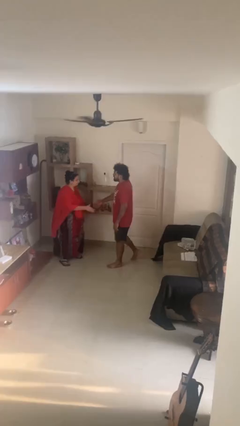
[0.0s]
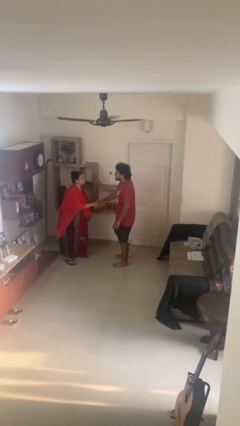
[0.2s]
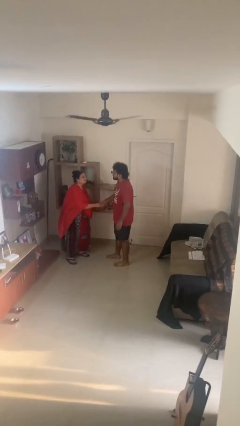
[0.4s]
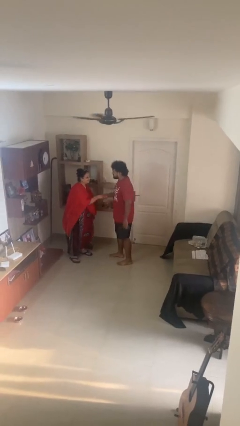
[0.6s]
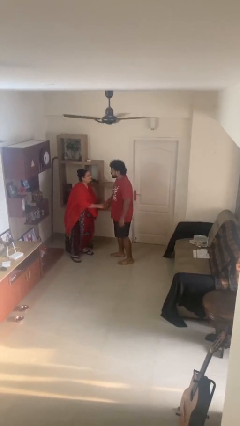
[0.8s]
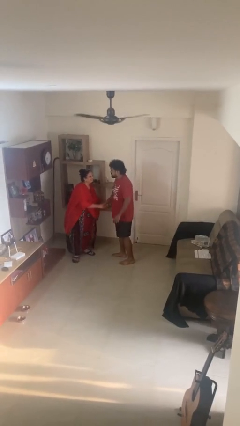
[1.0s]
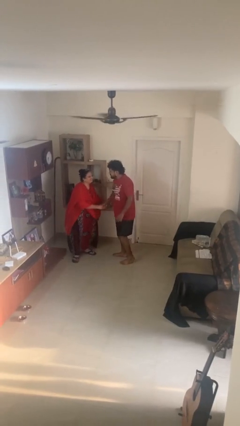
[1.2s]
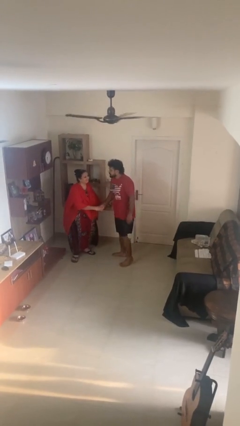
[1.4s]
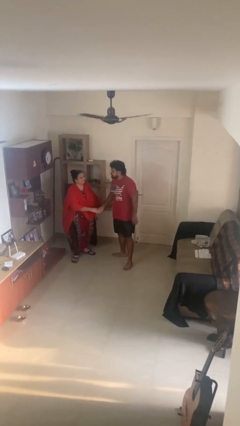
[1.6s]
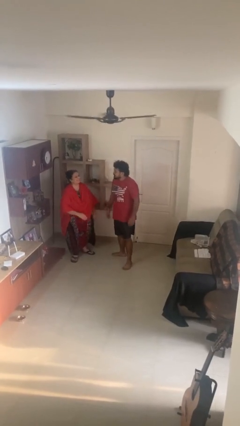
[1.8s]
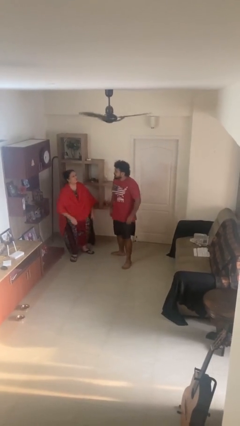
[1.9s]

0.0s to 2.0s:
person shakes hand

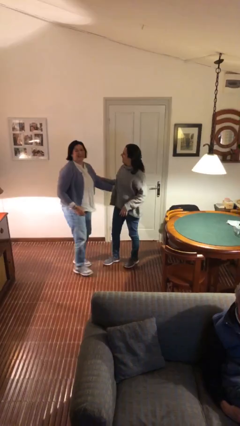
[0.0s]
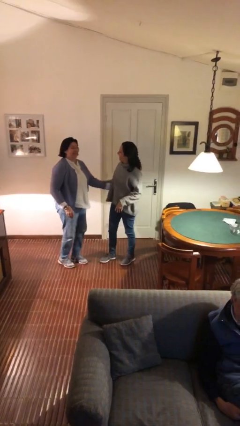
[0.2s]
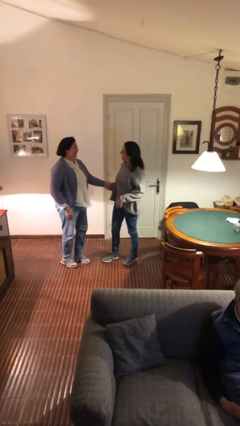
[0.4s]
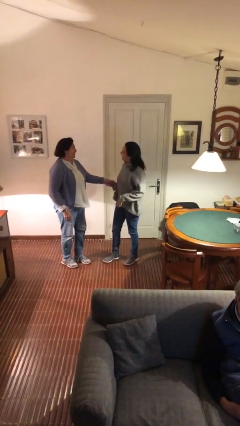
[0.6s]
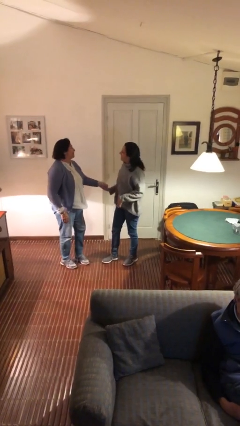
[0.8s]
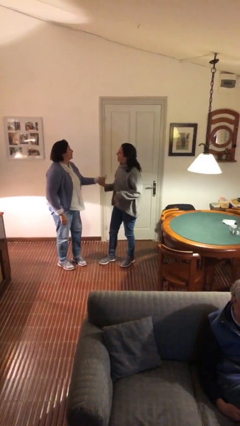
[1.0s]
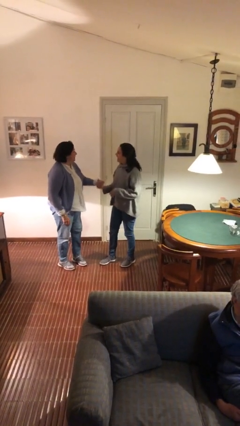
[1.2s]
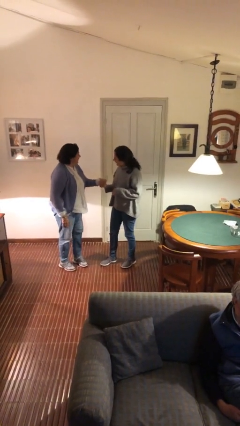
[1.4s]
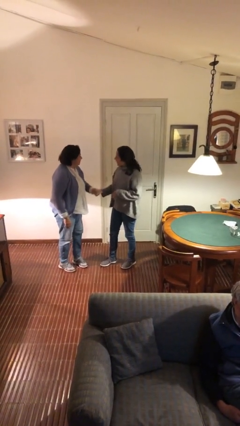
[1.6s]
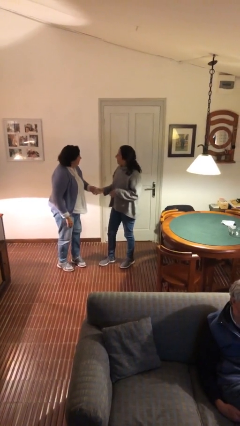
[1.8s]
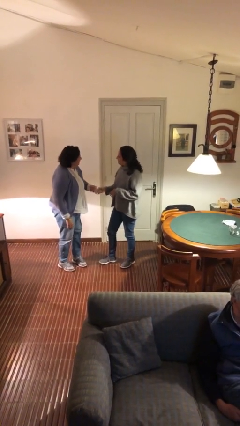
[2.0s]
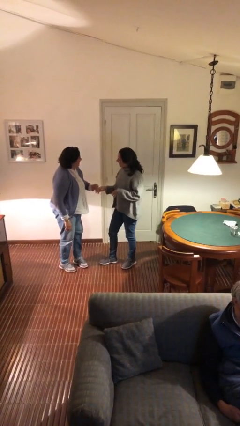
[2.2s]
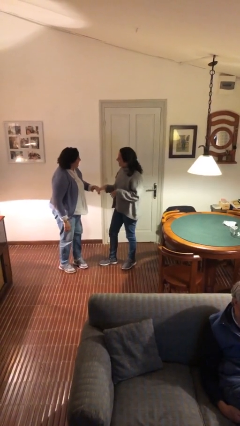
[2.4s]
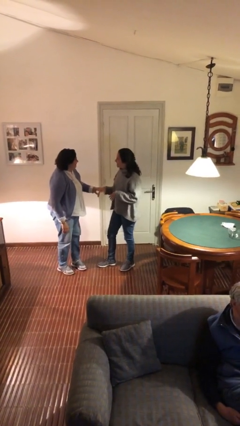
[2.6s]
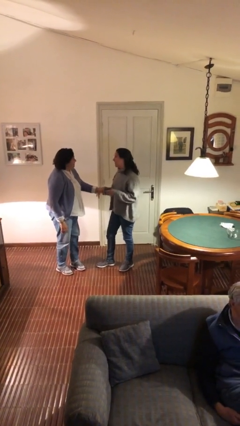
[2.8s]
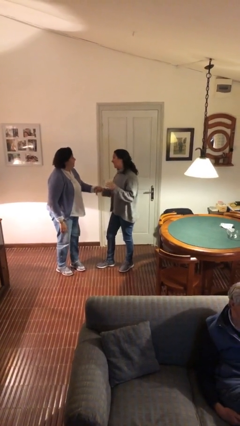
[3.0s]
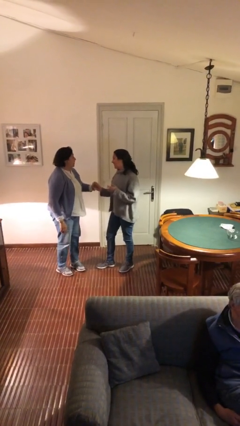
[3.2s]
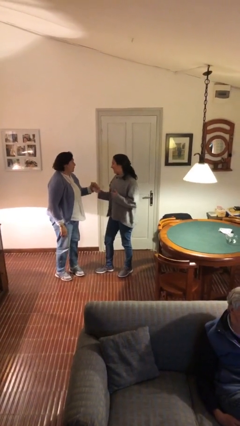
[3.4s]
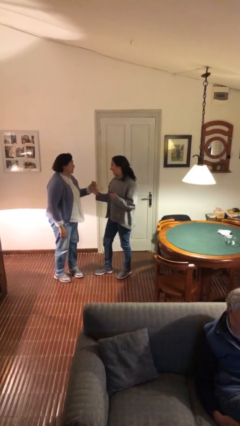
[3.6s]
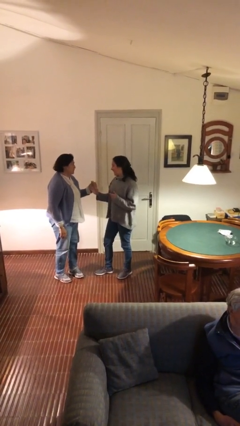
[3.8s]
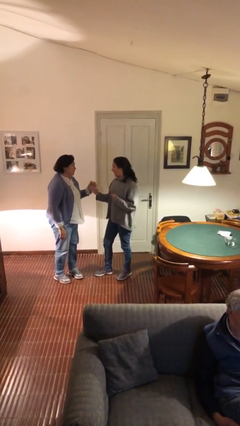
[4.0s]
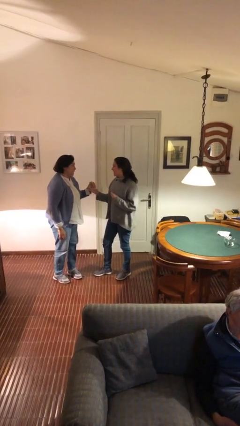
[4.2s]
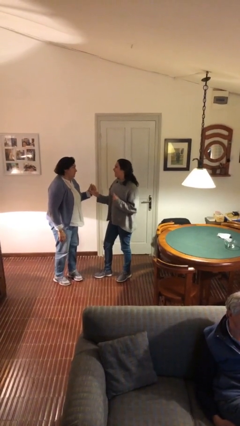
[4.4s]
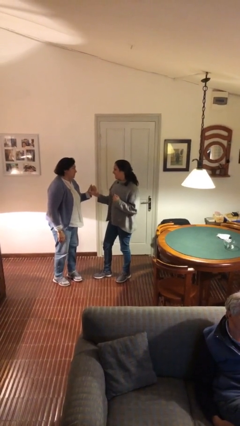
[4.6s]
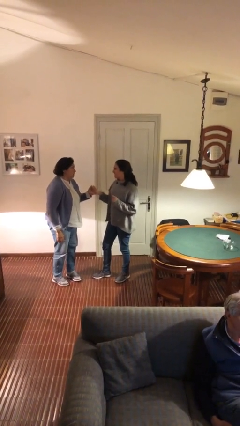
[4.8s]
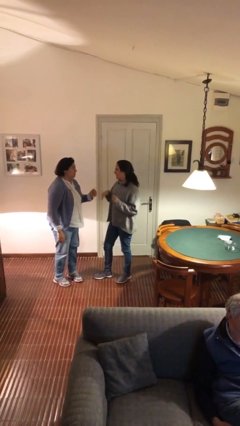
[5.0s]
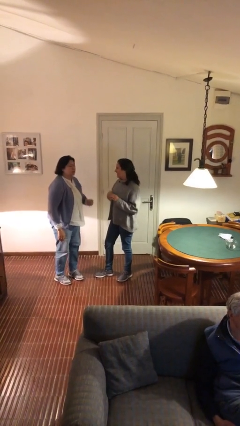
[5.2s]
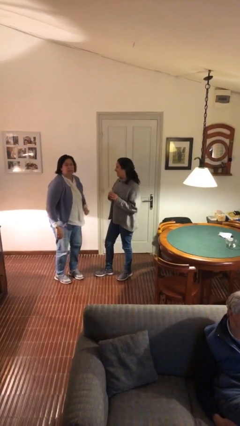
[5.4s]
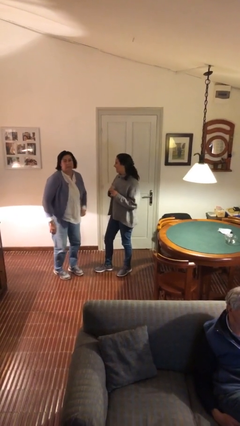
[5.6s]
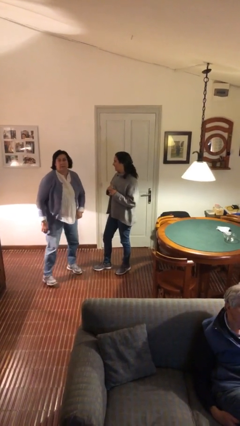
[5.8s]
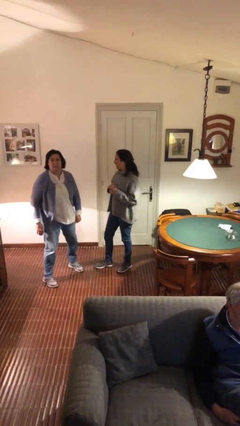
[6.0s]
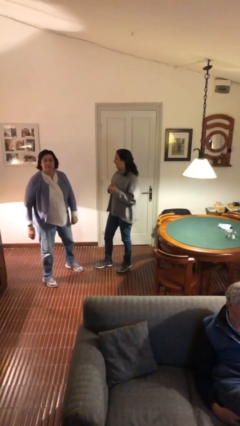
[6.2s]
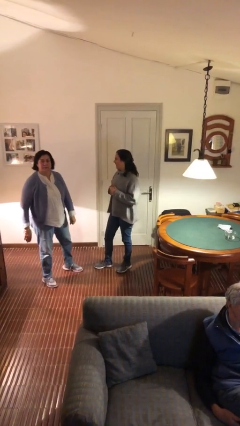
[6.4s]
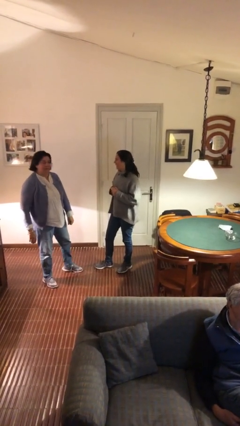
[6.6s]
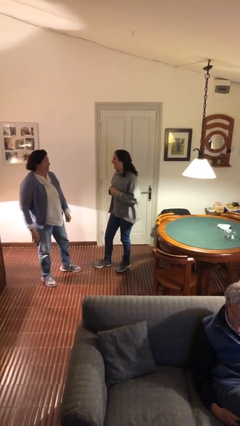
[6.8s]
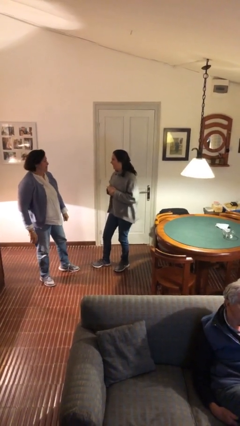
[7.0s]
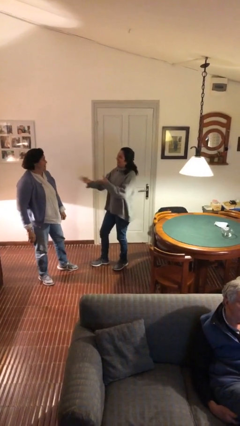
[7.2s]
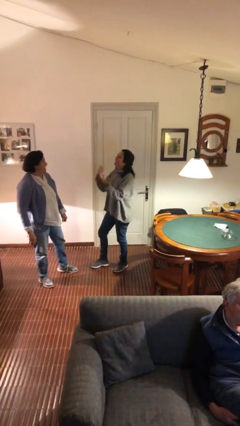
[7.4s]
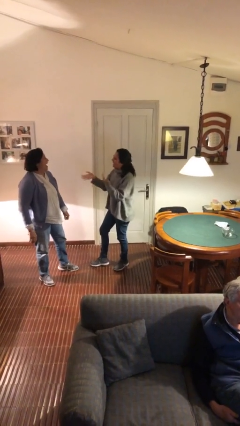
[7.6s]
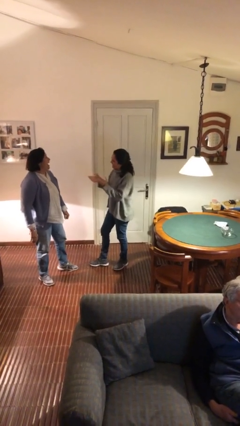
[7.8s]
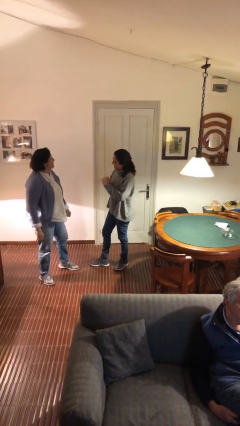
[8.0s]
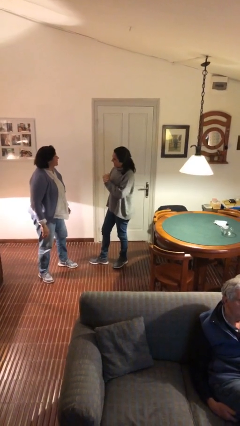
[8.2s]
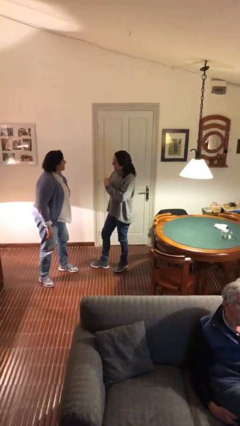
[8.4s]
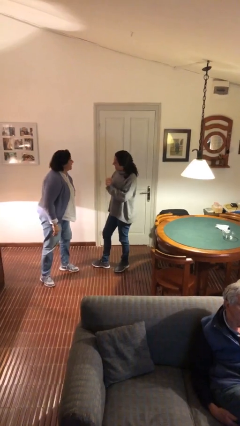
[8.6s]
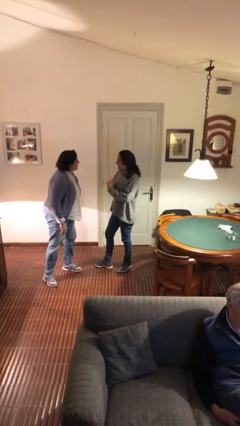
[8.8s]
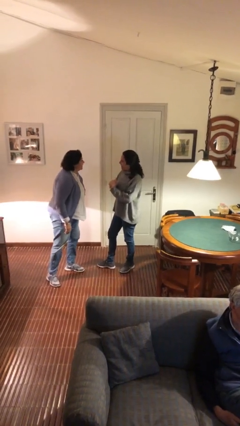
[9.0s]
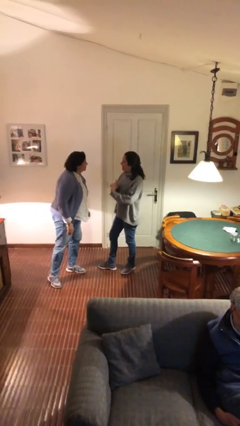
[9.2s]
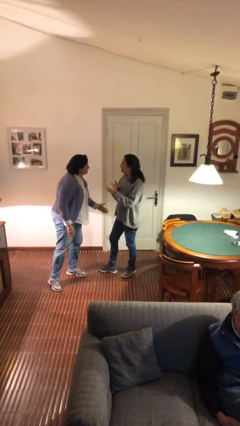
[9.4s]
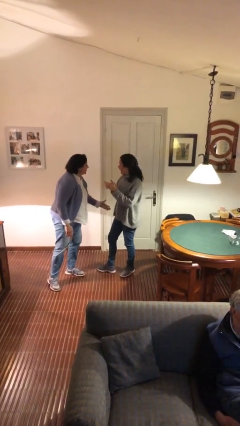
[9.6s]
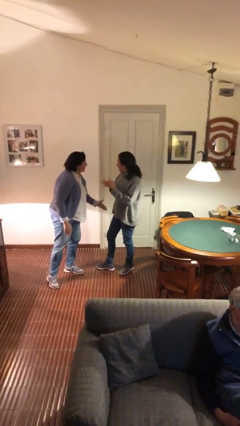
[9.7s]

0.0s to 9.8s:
person talks to person

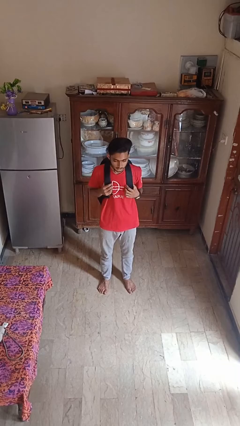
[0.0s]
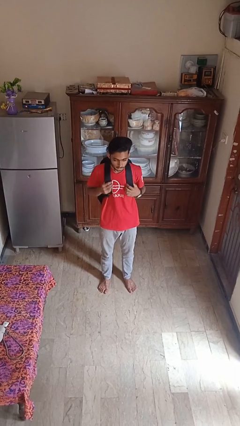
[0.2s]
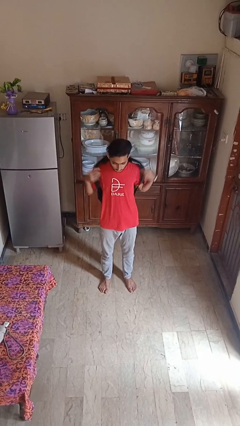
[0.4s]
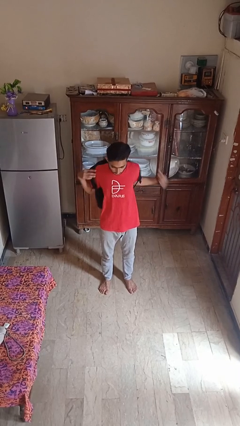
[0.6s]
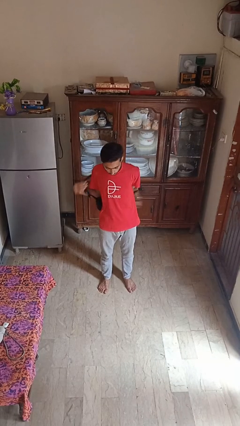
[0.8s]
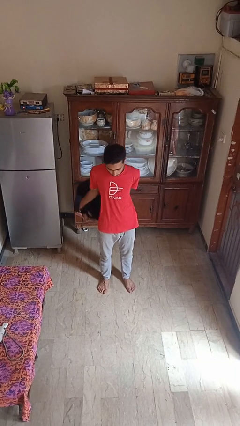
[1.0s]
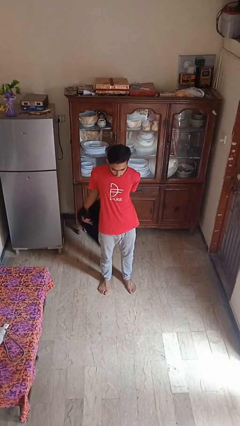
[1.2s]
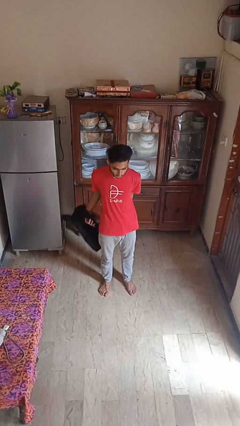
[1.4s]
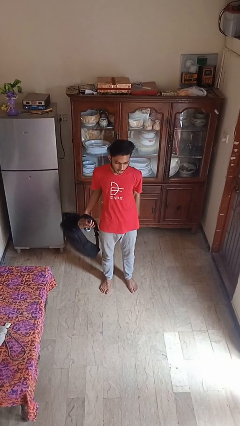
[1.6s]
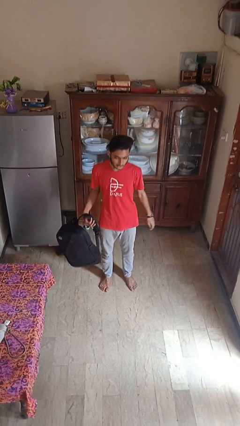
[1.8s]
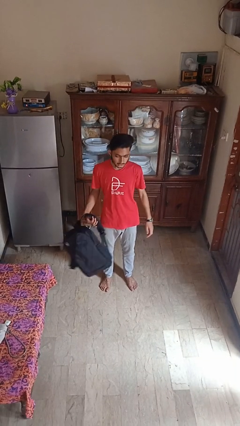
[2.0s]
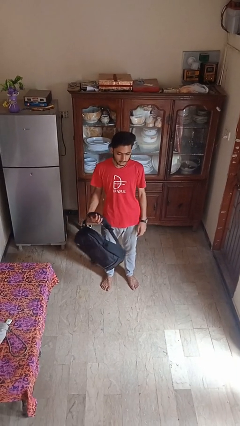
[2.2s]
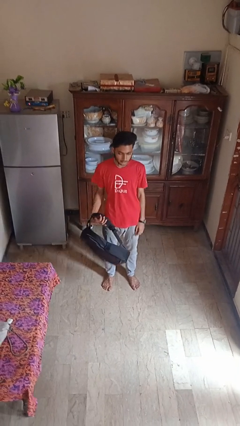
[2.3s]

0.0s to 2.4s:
person takes off backpack

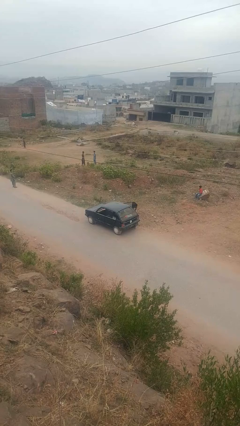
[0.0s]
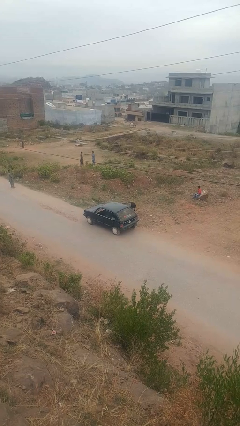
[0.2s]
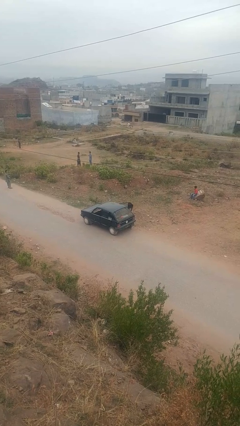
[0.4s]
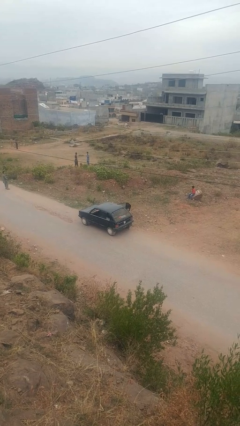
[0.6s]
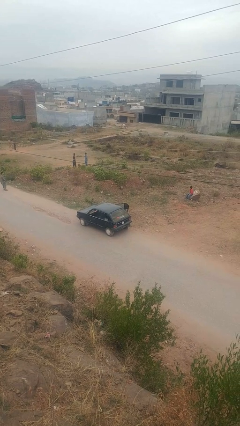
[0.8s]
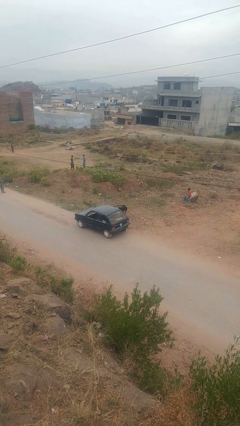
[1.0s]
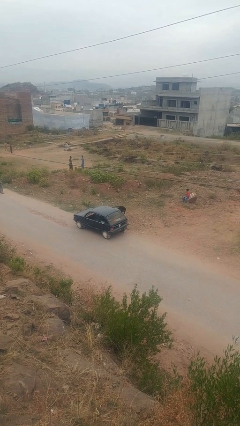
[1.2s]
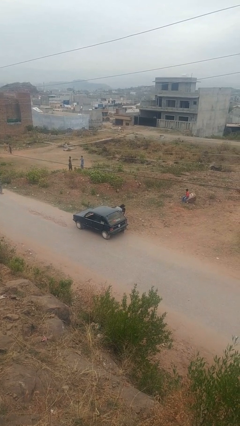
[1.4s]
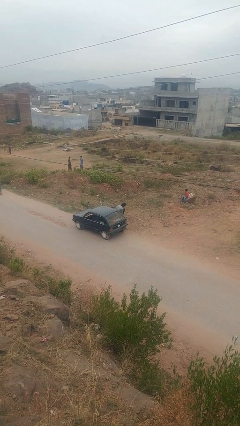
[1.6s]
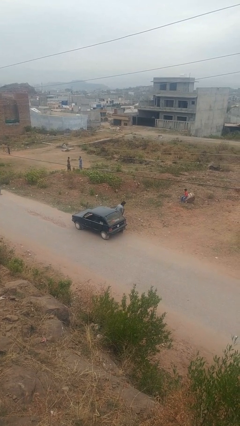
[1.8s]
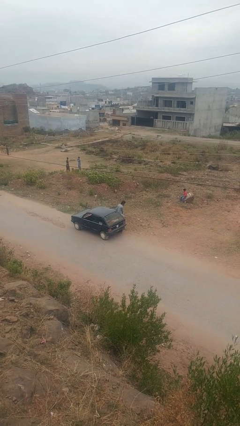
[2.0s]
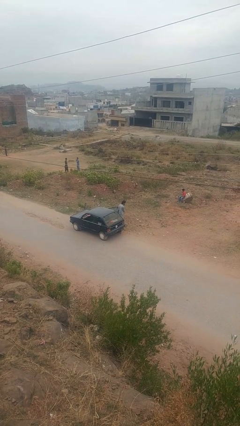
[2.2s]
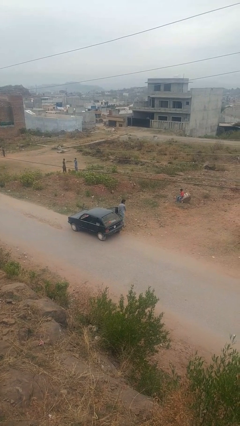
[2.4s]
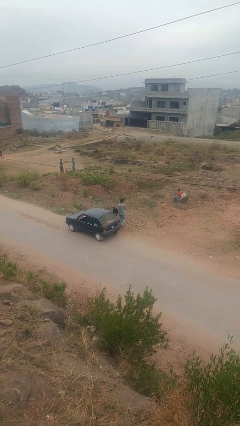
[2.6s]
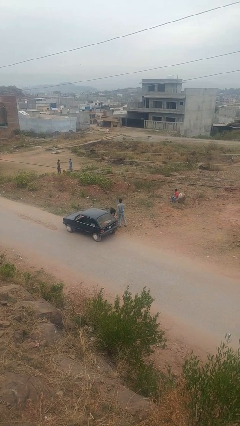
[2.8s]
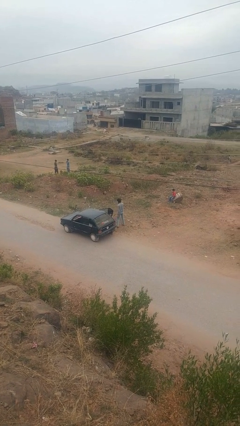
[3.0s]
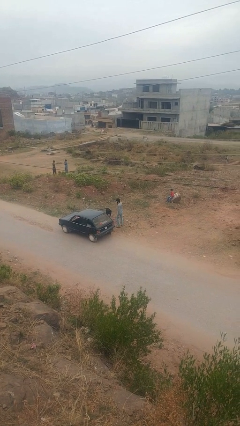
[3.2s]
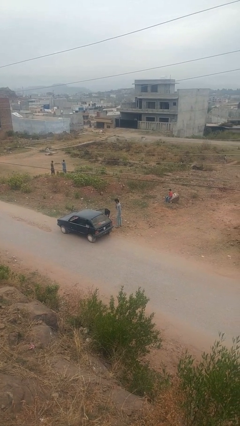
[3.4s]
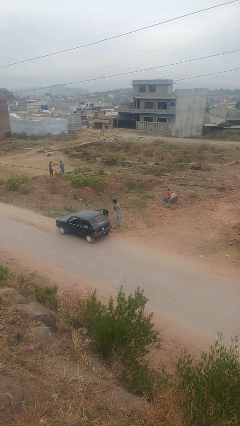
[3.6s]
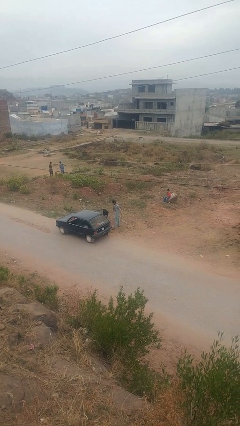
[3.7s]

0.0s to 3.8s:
person exits car
